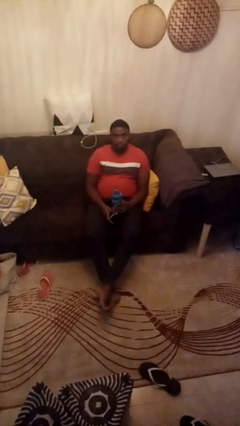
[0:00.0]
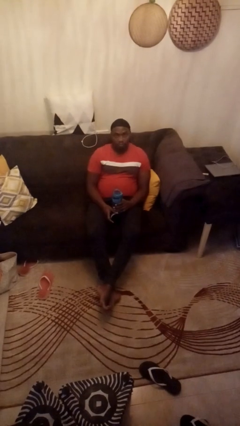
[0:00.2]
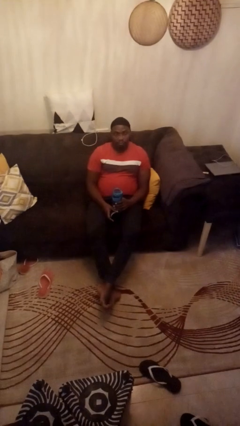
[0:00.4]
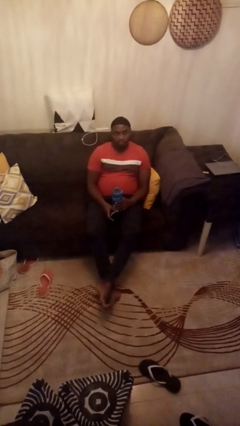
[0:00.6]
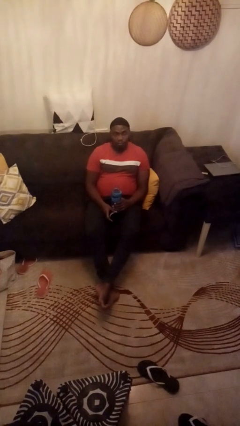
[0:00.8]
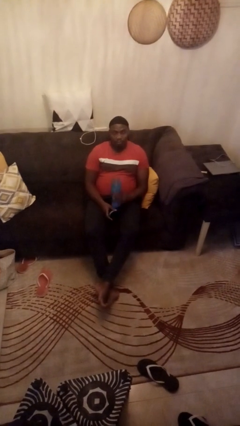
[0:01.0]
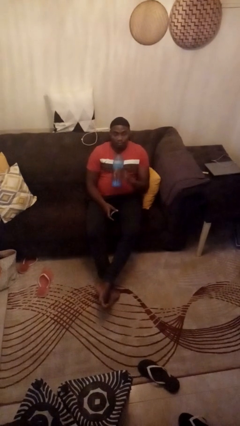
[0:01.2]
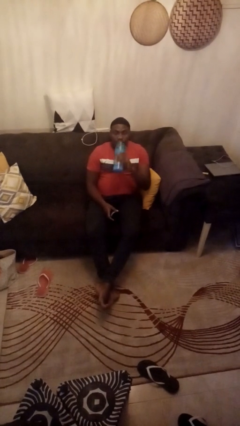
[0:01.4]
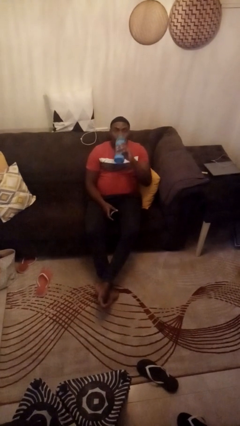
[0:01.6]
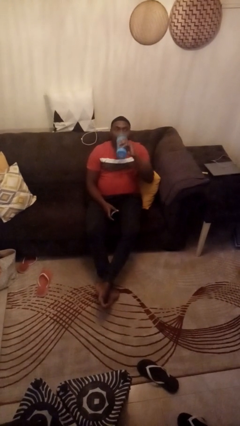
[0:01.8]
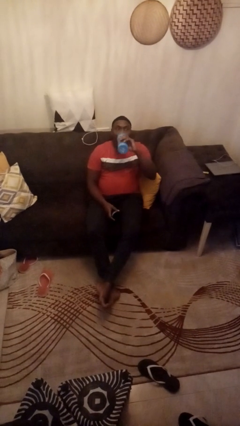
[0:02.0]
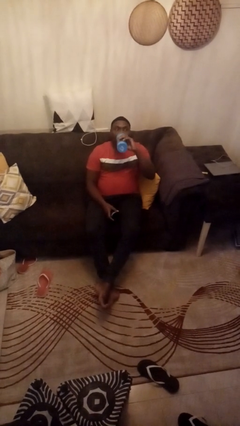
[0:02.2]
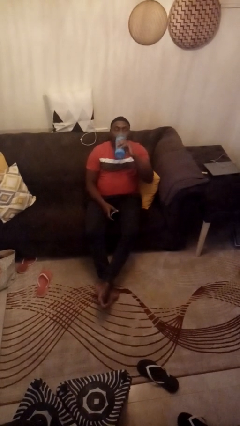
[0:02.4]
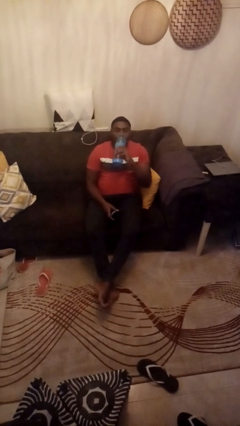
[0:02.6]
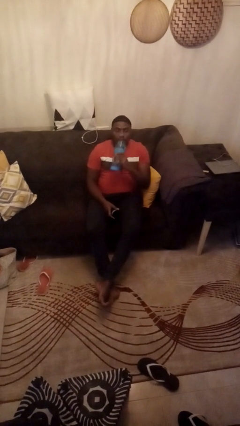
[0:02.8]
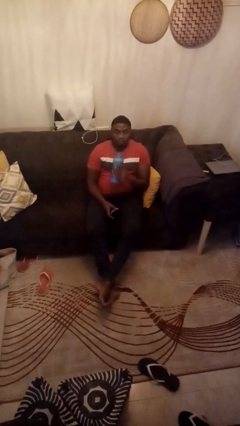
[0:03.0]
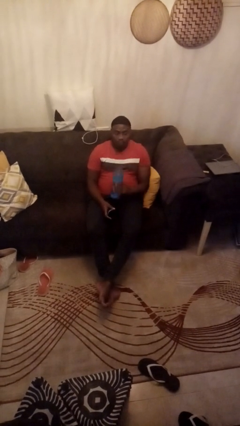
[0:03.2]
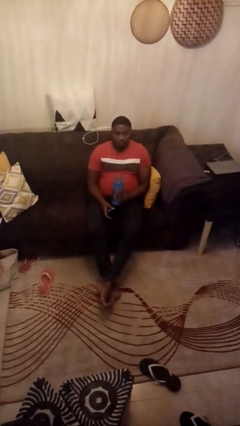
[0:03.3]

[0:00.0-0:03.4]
person drinks from bottle

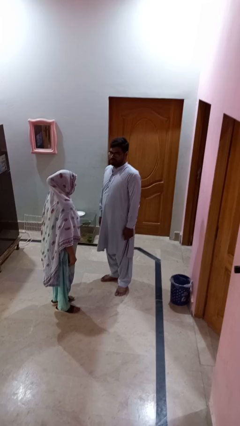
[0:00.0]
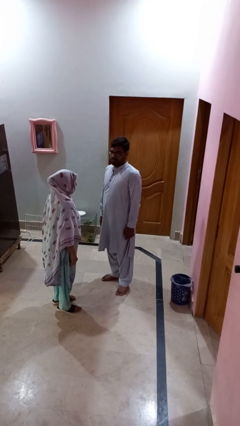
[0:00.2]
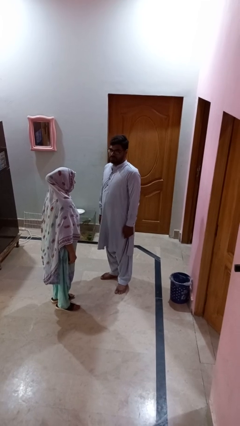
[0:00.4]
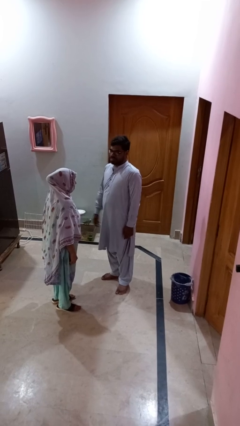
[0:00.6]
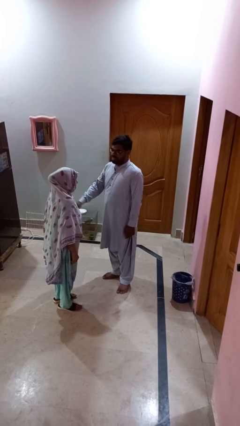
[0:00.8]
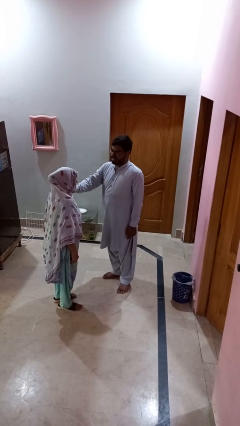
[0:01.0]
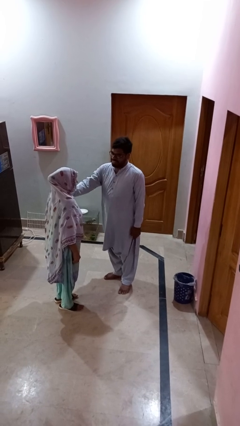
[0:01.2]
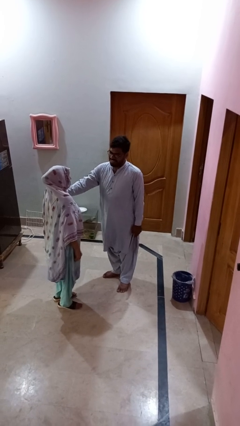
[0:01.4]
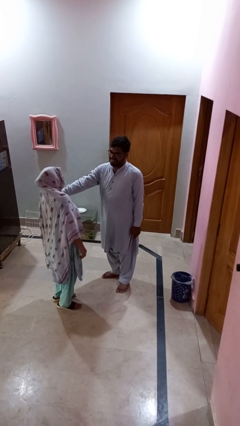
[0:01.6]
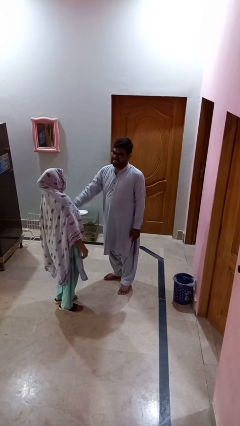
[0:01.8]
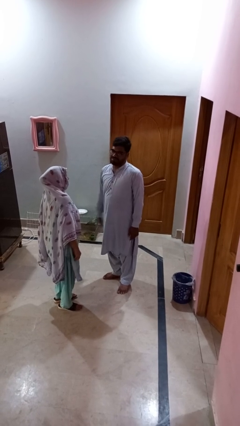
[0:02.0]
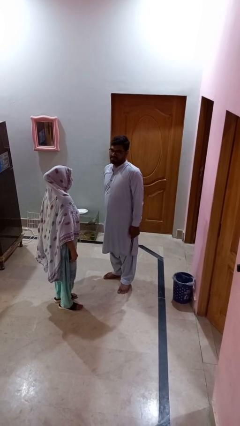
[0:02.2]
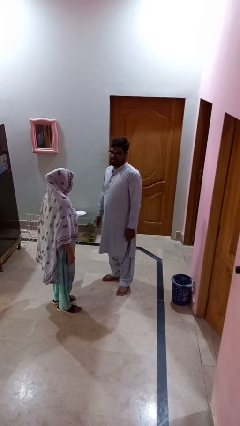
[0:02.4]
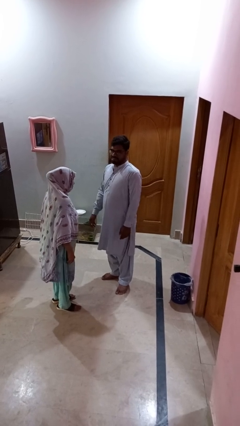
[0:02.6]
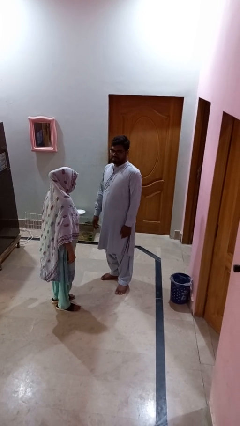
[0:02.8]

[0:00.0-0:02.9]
person shoves person

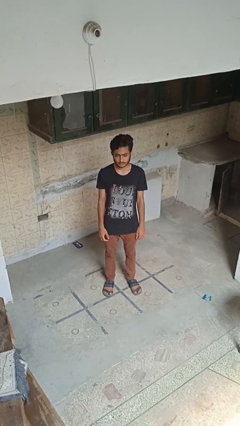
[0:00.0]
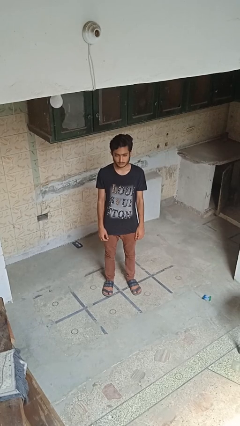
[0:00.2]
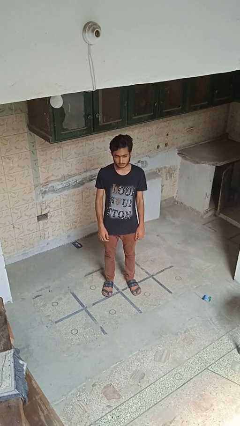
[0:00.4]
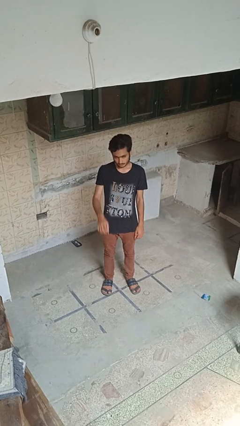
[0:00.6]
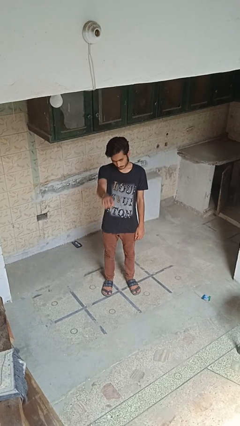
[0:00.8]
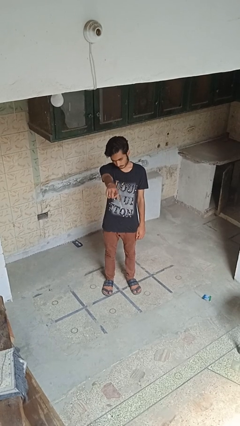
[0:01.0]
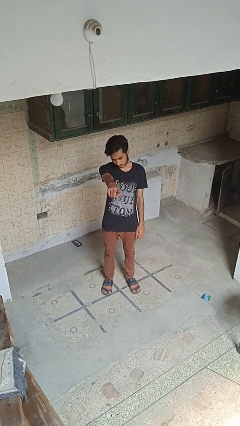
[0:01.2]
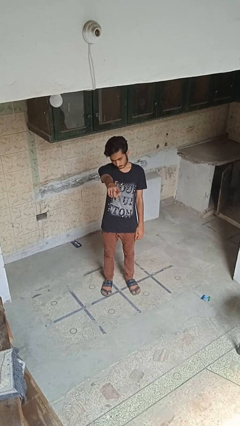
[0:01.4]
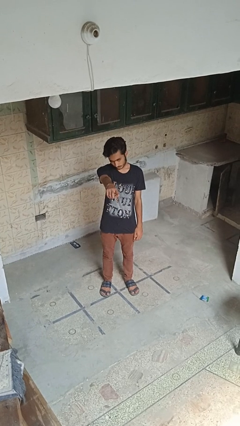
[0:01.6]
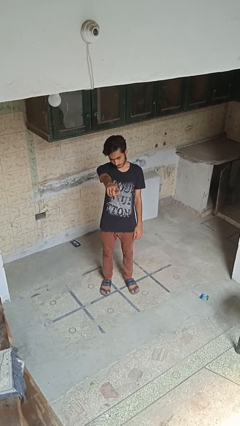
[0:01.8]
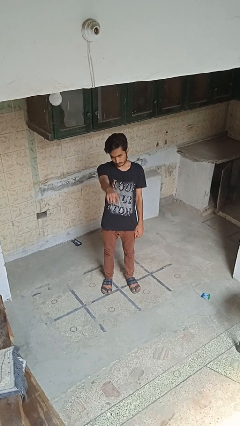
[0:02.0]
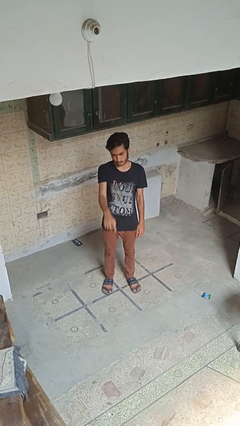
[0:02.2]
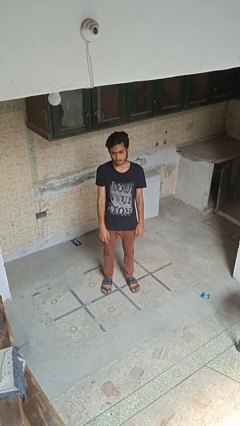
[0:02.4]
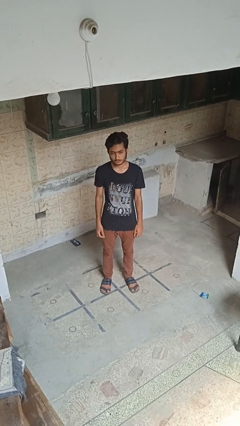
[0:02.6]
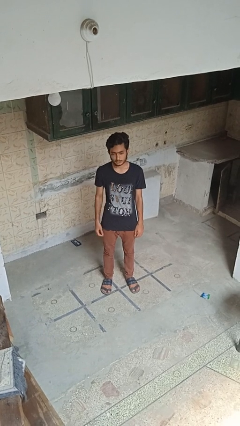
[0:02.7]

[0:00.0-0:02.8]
person points at person

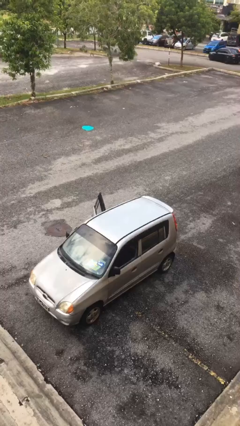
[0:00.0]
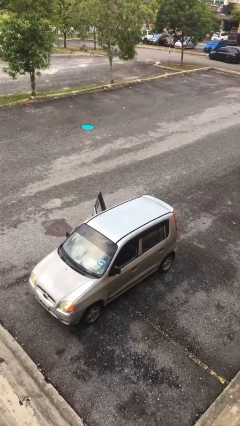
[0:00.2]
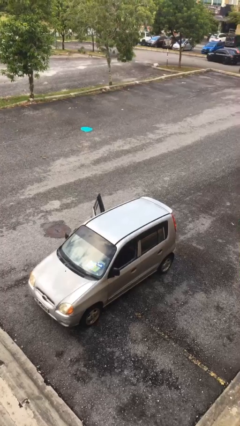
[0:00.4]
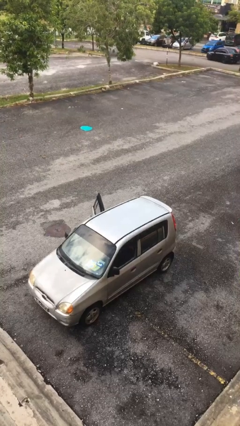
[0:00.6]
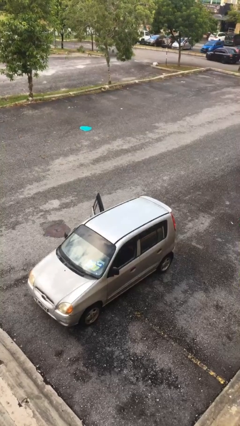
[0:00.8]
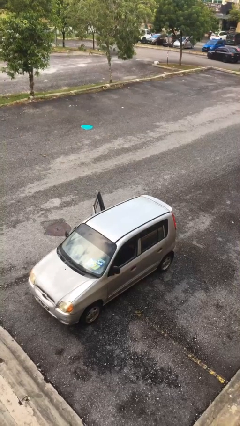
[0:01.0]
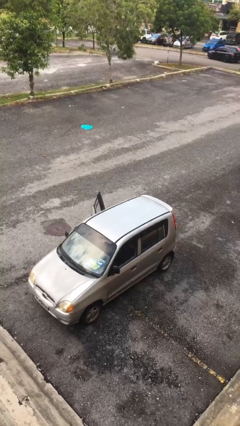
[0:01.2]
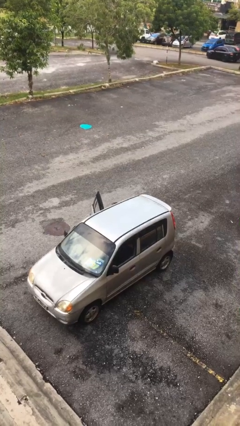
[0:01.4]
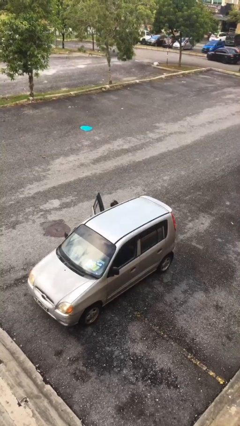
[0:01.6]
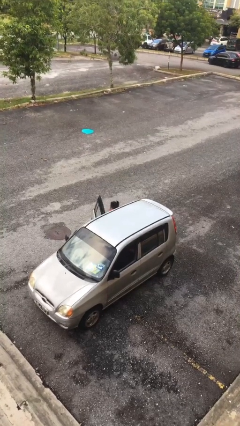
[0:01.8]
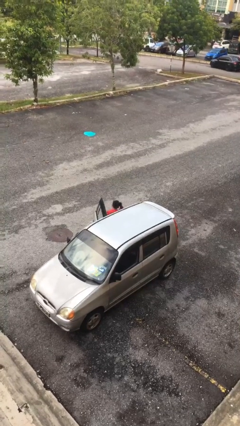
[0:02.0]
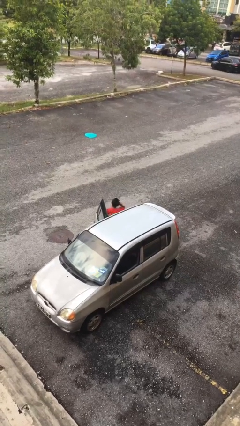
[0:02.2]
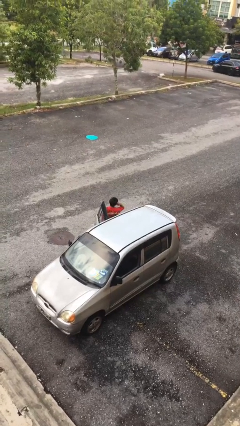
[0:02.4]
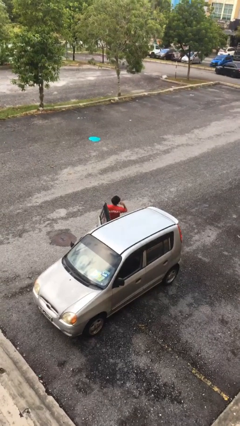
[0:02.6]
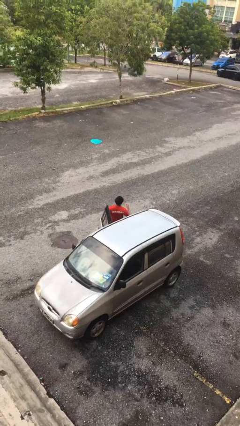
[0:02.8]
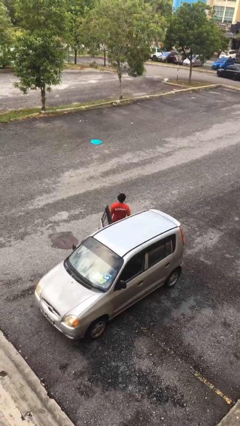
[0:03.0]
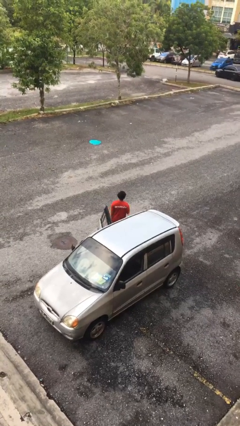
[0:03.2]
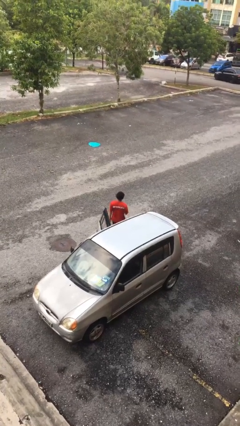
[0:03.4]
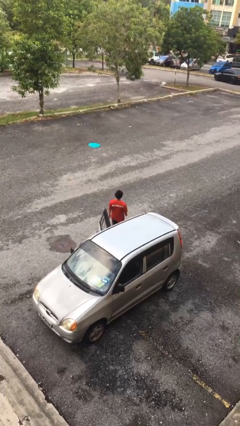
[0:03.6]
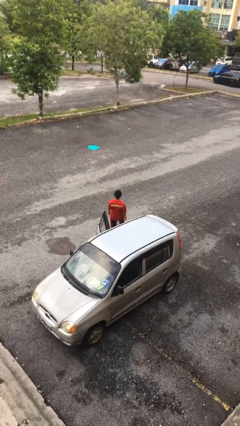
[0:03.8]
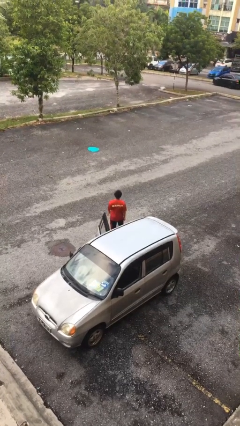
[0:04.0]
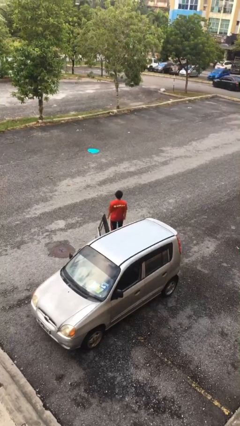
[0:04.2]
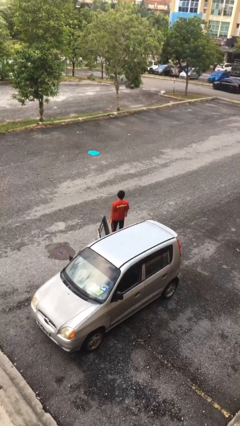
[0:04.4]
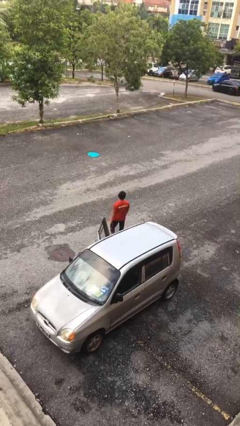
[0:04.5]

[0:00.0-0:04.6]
person exits car

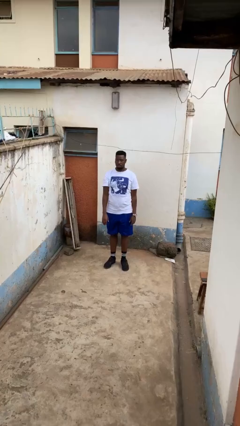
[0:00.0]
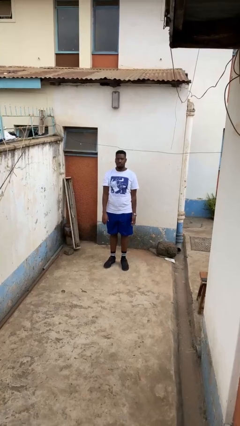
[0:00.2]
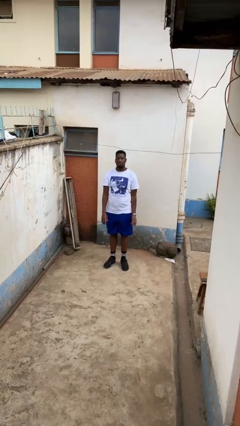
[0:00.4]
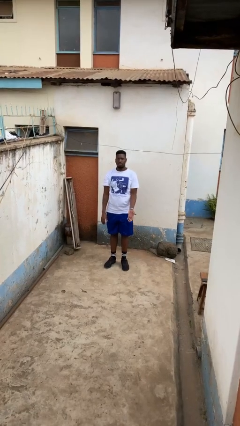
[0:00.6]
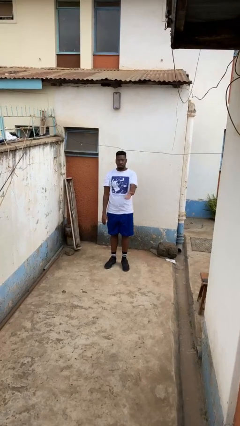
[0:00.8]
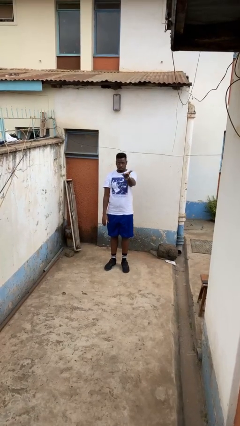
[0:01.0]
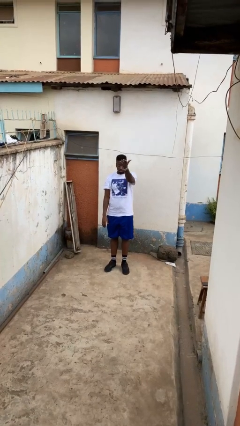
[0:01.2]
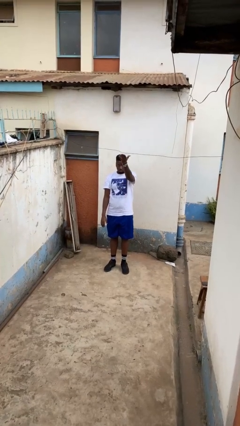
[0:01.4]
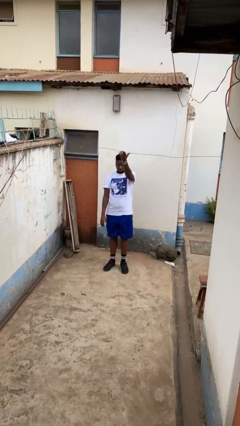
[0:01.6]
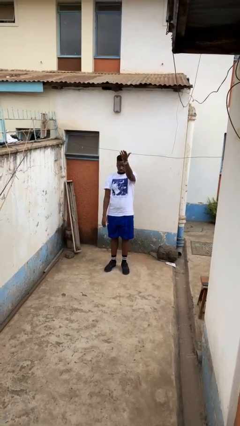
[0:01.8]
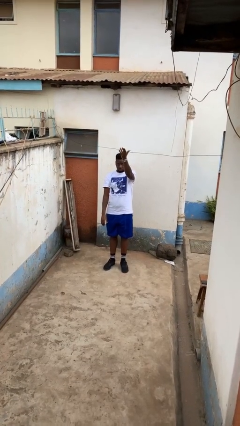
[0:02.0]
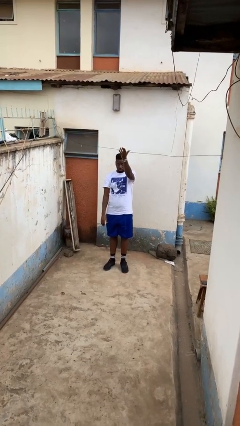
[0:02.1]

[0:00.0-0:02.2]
person gestures swipe up

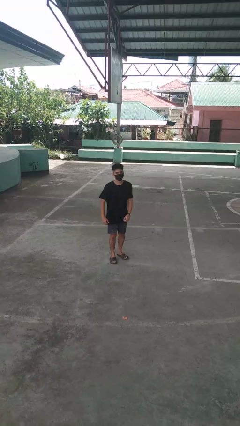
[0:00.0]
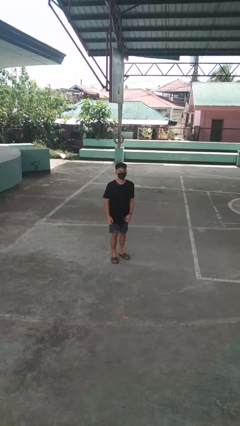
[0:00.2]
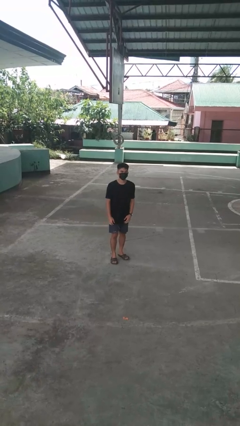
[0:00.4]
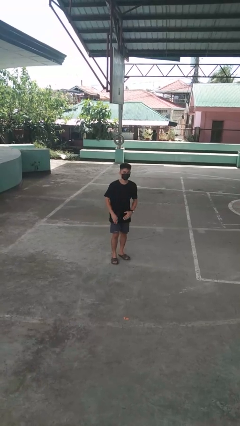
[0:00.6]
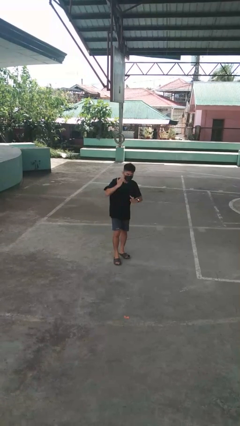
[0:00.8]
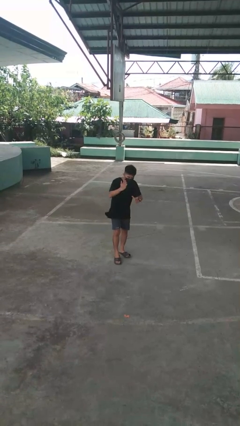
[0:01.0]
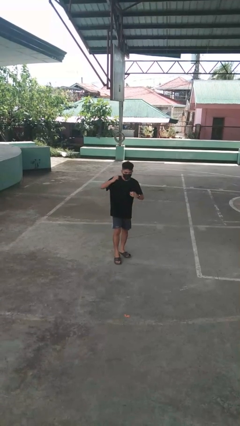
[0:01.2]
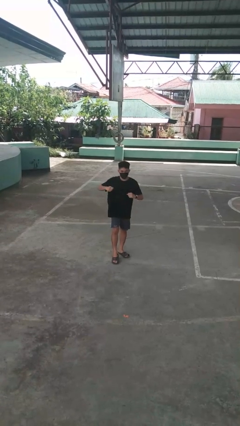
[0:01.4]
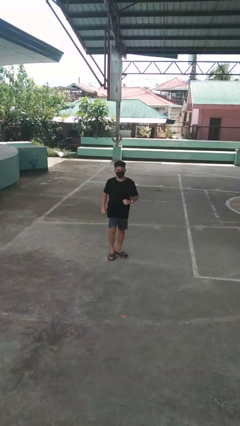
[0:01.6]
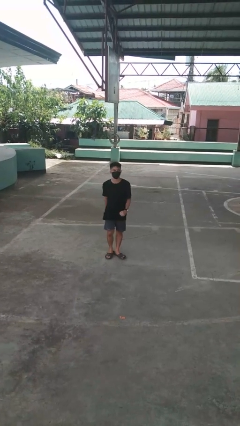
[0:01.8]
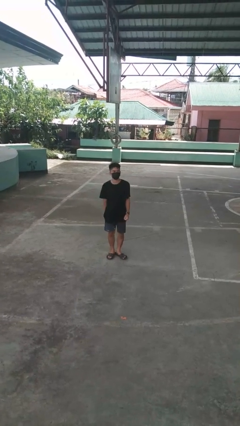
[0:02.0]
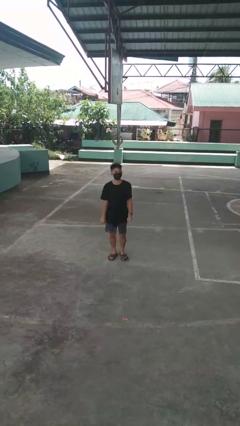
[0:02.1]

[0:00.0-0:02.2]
person karate chop

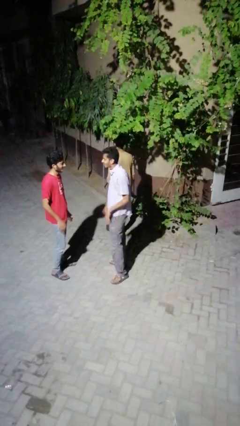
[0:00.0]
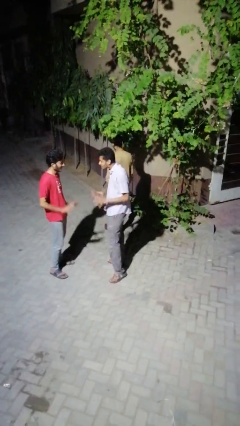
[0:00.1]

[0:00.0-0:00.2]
person talks to person
